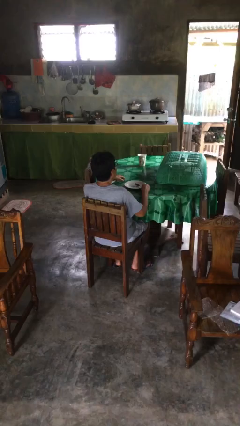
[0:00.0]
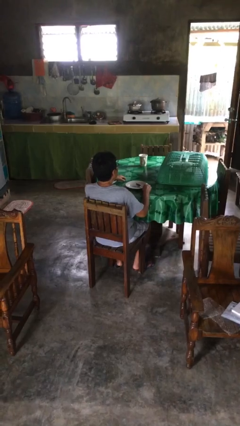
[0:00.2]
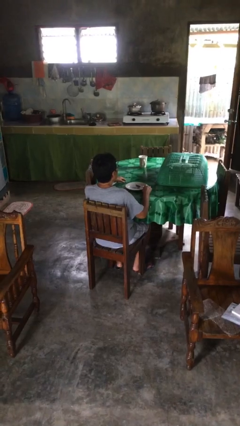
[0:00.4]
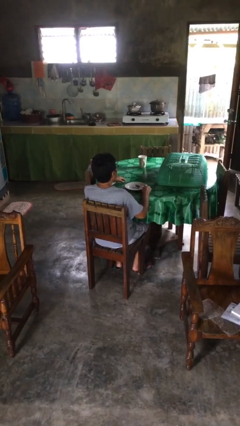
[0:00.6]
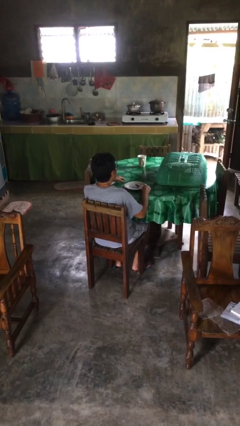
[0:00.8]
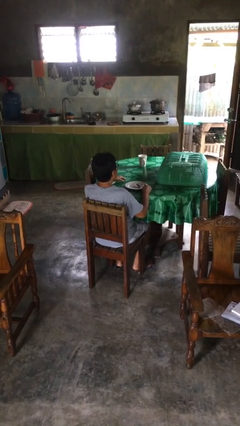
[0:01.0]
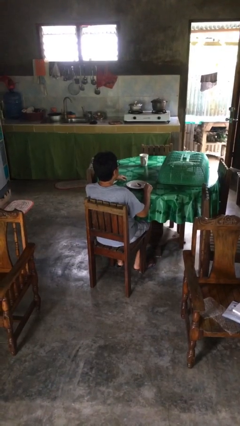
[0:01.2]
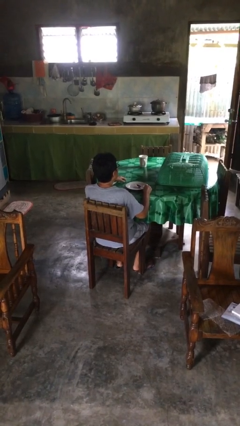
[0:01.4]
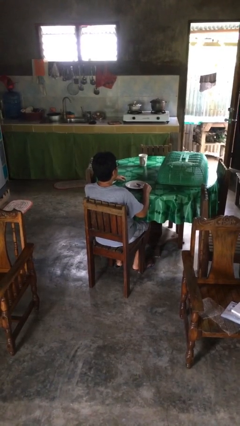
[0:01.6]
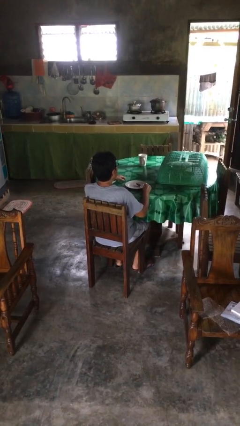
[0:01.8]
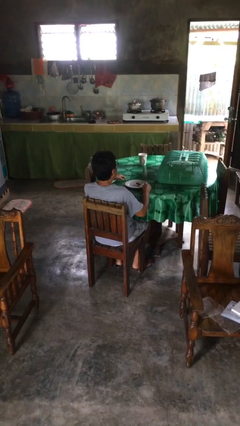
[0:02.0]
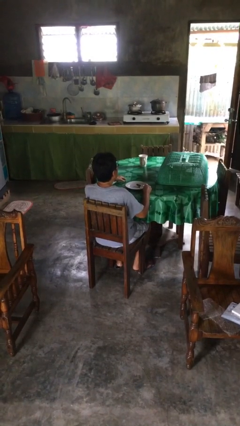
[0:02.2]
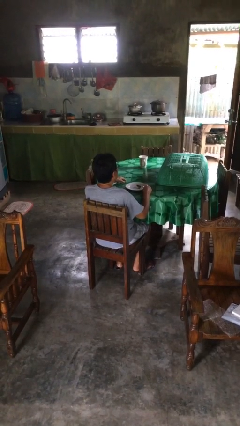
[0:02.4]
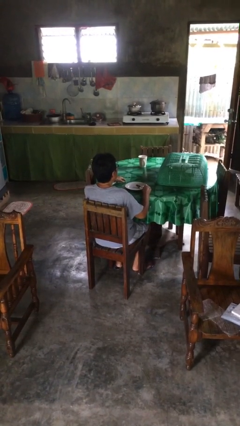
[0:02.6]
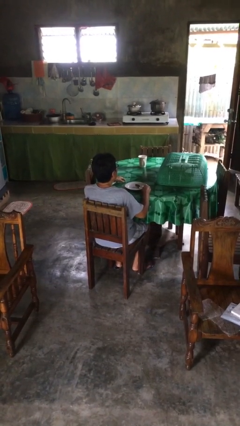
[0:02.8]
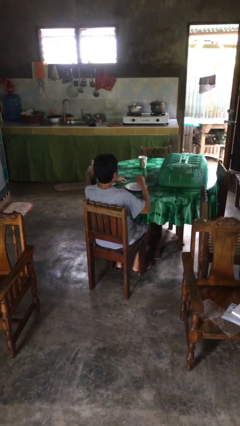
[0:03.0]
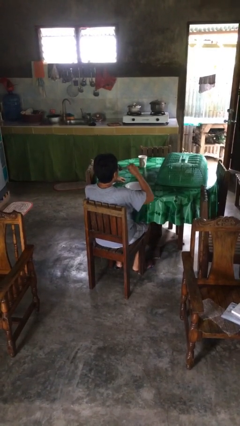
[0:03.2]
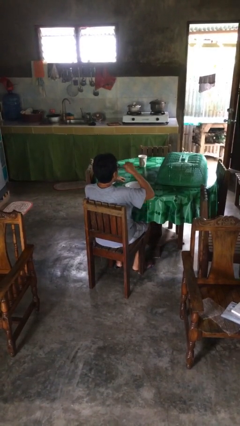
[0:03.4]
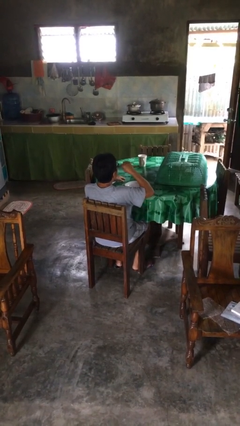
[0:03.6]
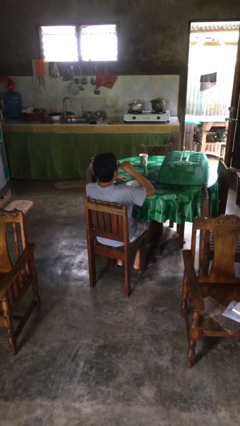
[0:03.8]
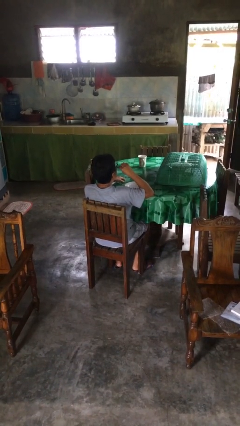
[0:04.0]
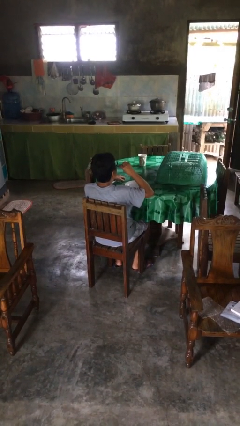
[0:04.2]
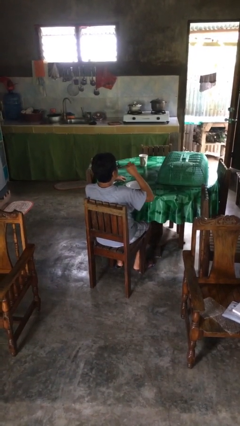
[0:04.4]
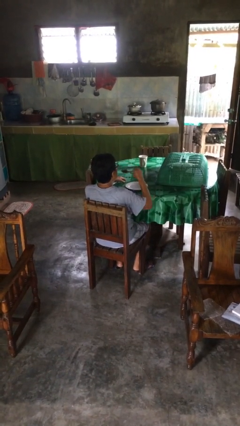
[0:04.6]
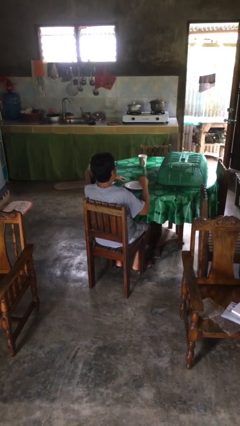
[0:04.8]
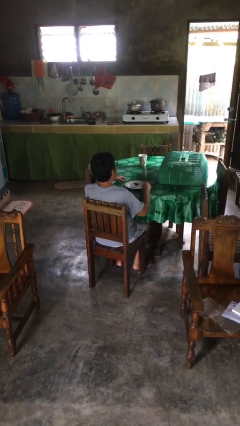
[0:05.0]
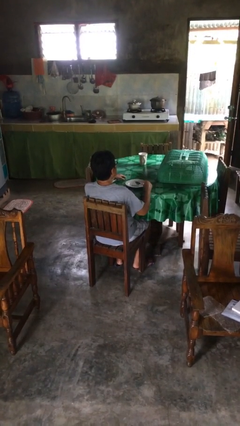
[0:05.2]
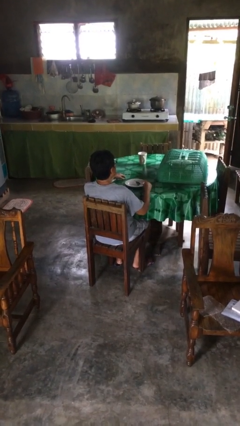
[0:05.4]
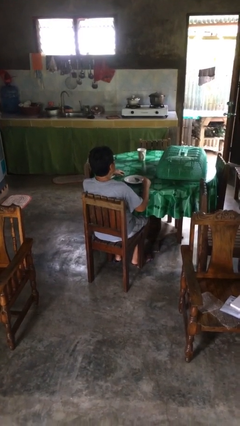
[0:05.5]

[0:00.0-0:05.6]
person eats with utensil

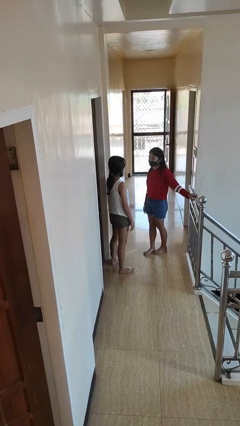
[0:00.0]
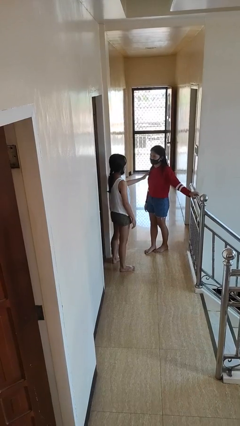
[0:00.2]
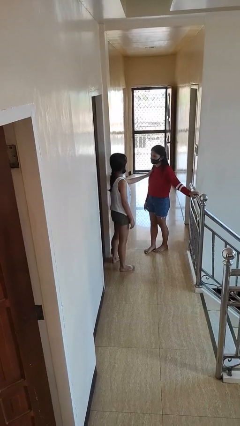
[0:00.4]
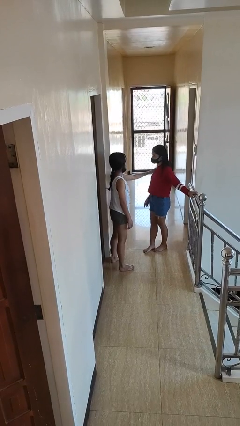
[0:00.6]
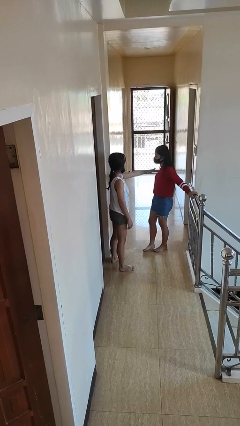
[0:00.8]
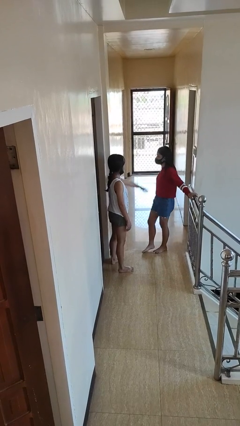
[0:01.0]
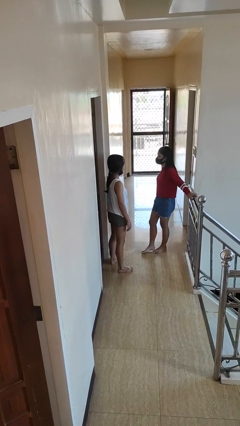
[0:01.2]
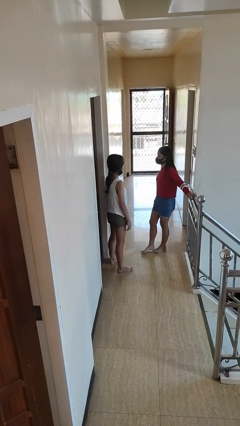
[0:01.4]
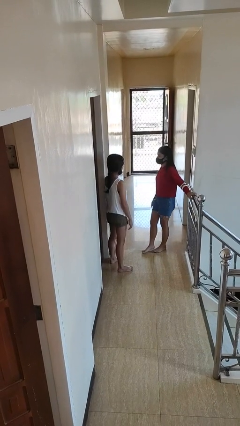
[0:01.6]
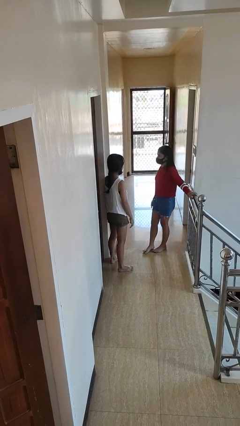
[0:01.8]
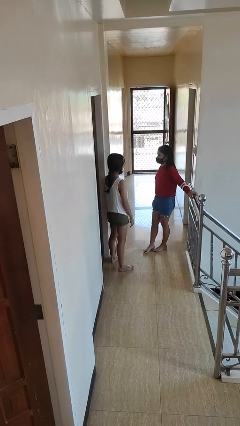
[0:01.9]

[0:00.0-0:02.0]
person shoves person

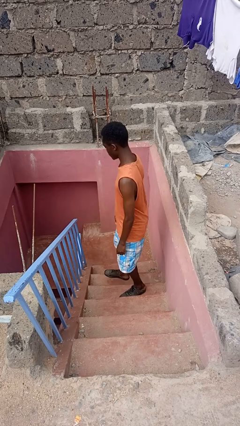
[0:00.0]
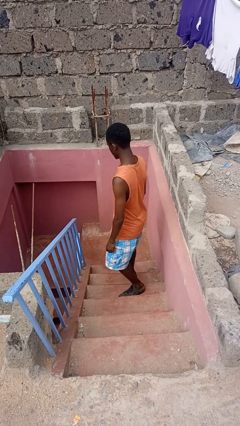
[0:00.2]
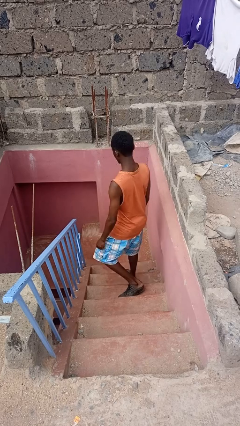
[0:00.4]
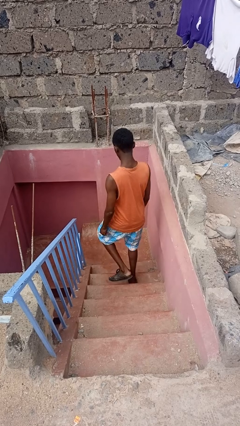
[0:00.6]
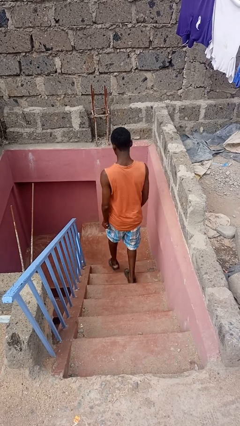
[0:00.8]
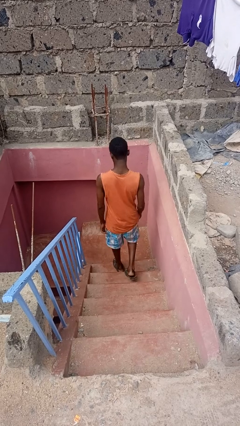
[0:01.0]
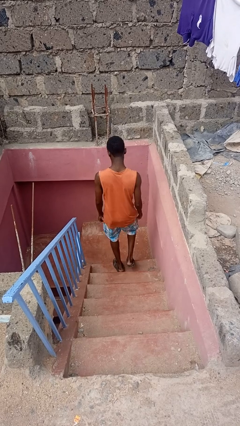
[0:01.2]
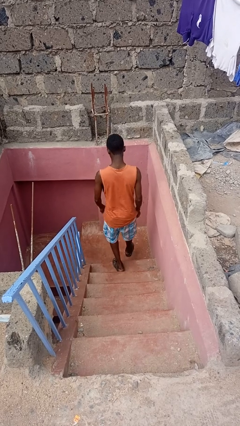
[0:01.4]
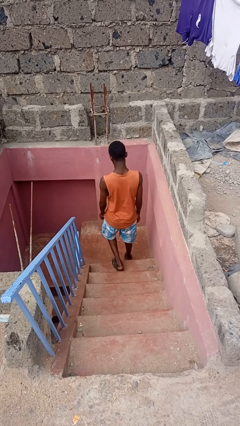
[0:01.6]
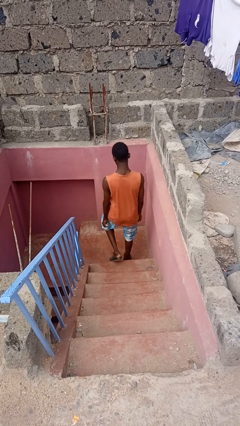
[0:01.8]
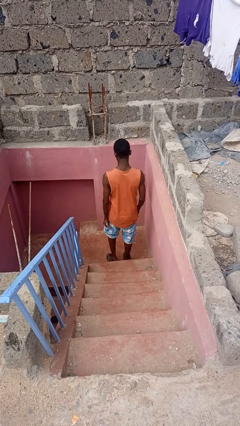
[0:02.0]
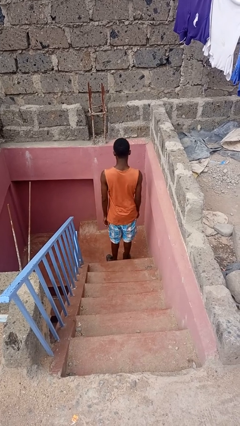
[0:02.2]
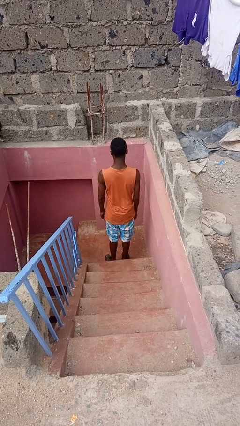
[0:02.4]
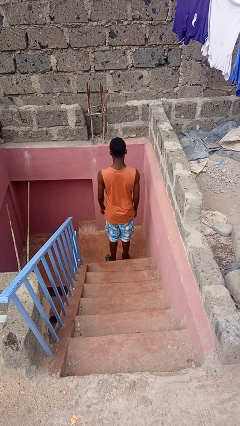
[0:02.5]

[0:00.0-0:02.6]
person climbs down stairs

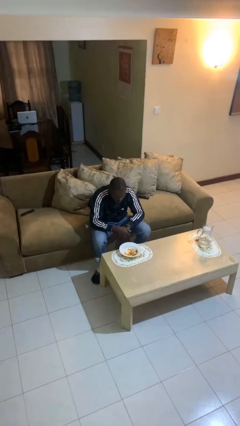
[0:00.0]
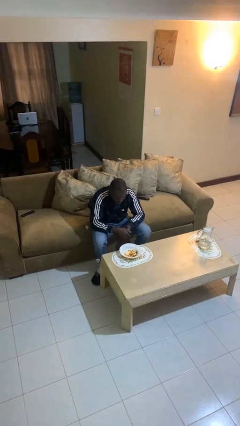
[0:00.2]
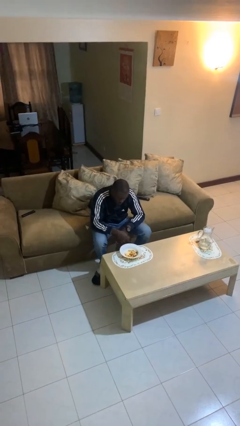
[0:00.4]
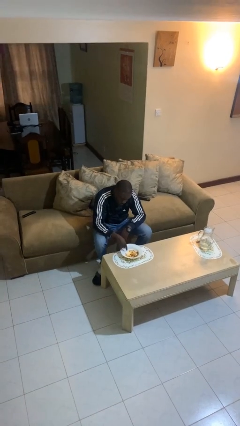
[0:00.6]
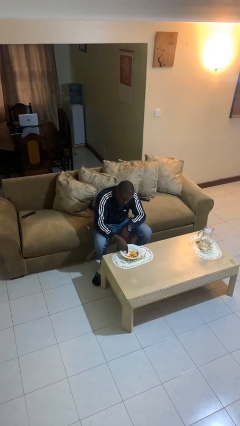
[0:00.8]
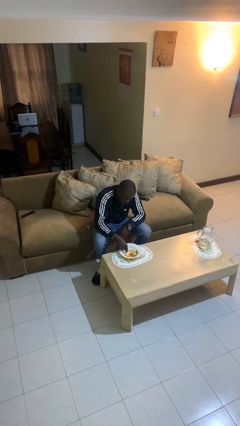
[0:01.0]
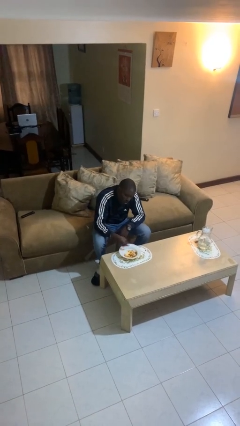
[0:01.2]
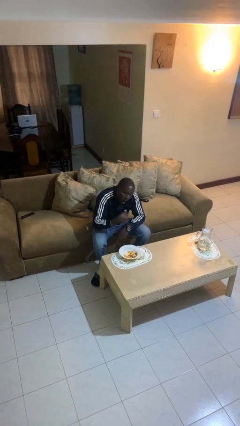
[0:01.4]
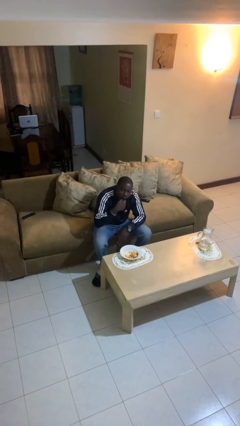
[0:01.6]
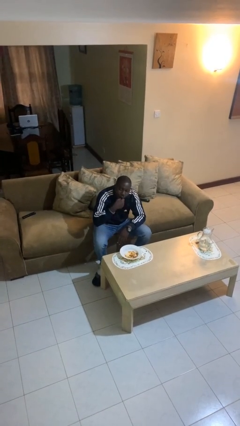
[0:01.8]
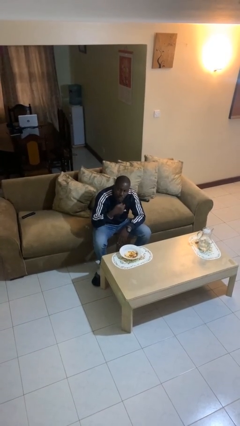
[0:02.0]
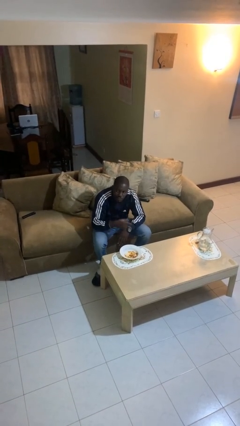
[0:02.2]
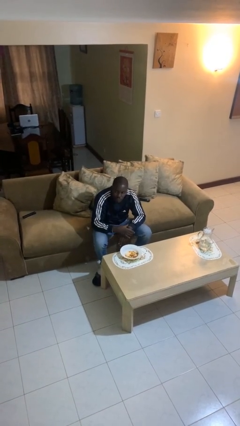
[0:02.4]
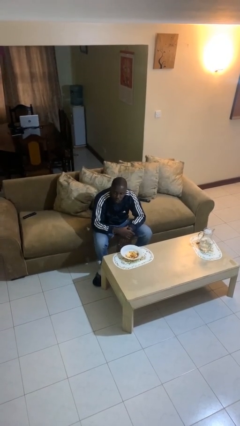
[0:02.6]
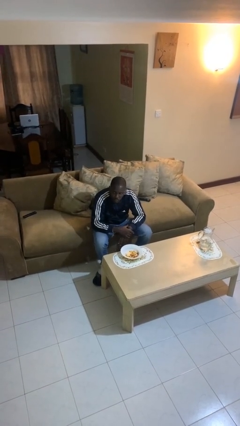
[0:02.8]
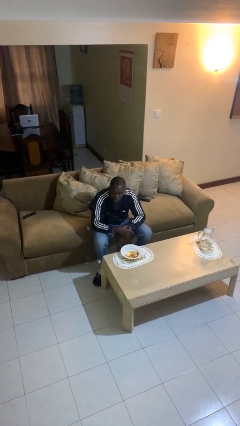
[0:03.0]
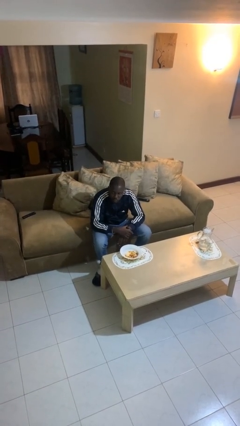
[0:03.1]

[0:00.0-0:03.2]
person eats with hands

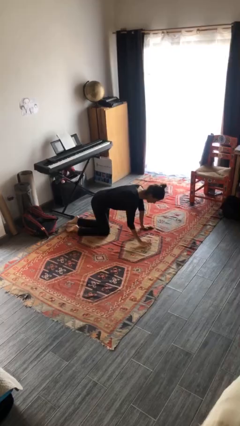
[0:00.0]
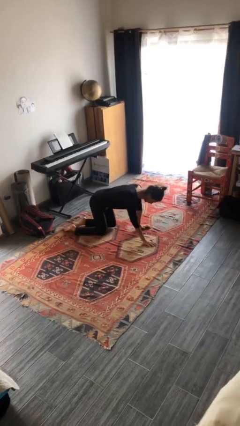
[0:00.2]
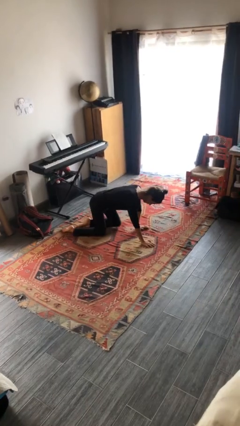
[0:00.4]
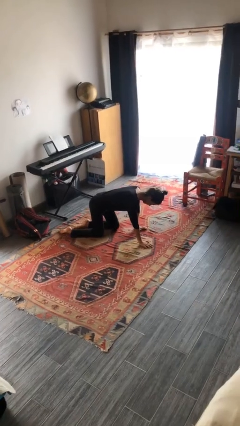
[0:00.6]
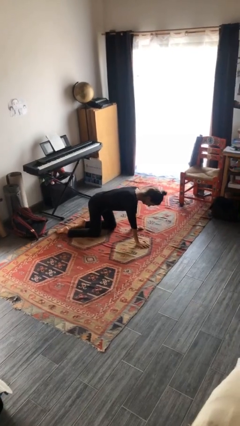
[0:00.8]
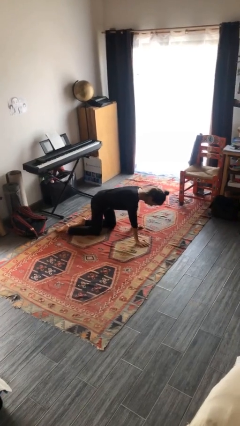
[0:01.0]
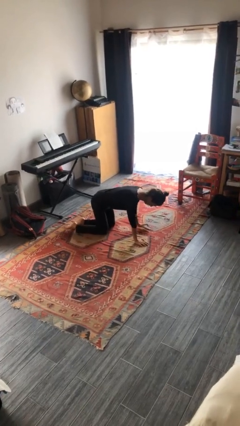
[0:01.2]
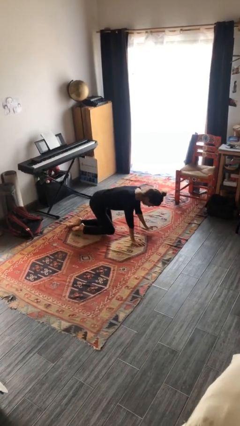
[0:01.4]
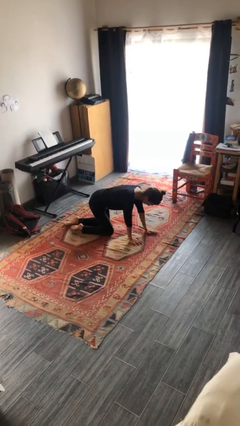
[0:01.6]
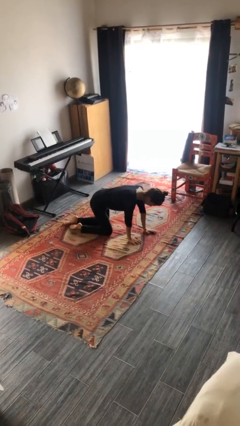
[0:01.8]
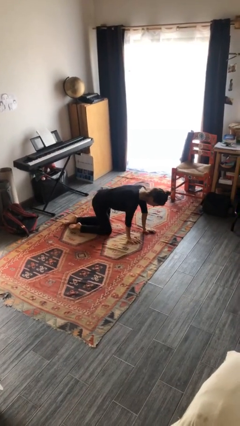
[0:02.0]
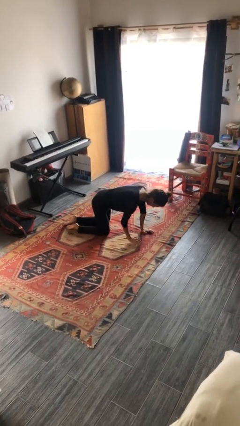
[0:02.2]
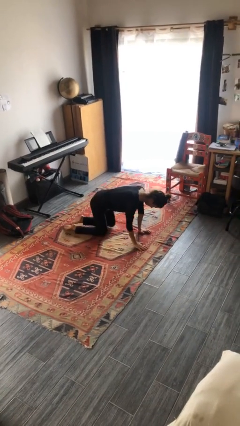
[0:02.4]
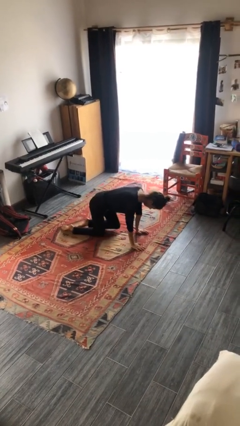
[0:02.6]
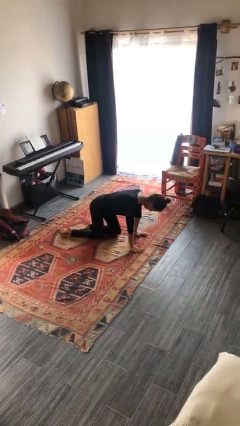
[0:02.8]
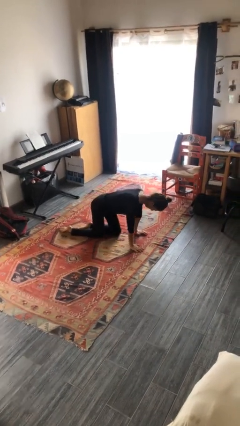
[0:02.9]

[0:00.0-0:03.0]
person crawls

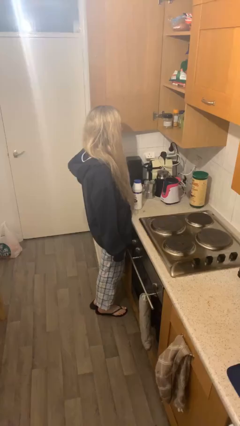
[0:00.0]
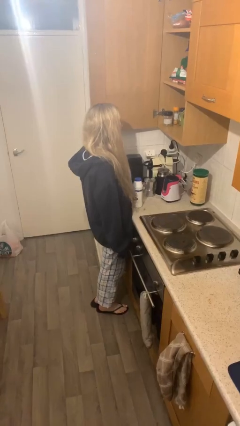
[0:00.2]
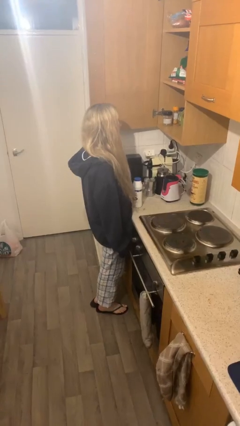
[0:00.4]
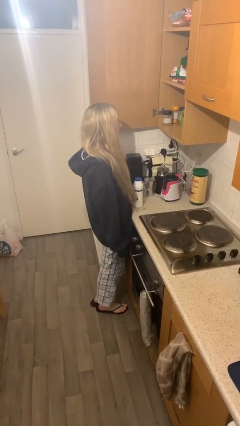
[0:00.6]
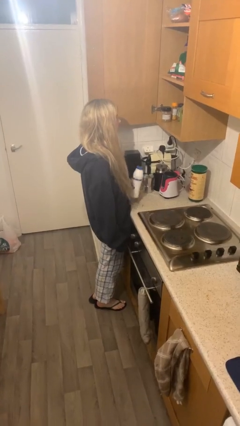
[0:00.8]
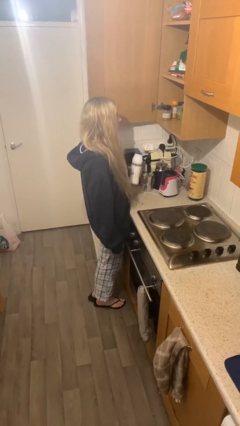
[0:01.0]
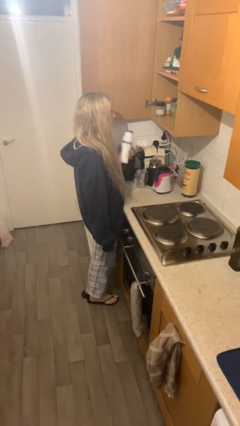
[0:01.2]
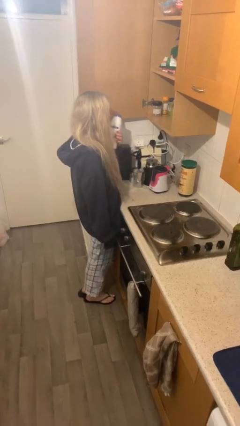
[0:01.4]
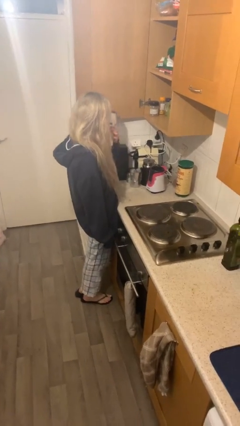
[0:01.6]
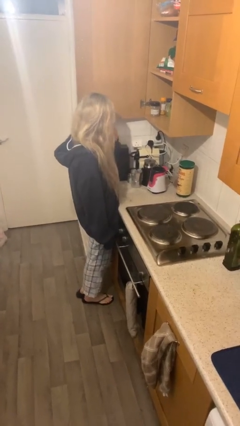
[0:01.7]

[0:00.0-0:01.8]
person picks up object from table
